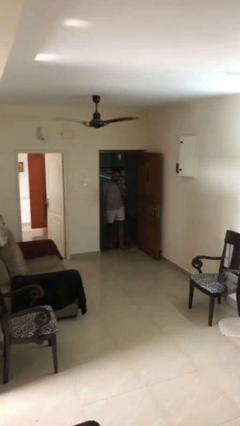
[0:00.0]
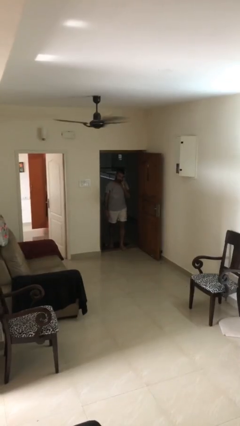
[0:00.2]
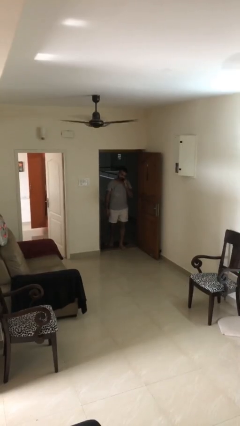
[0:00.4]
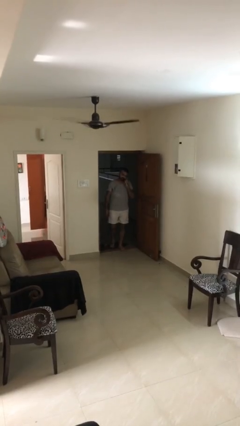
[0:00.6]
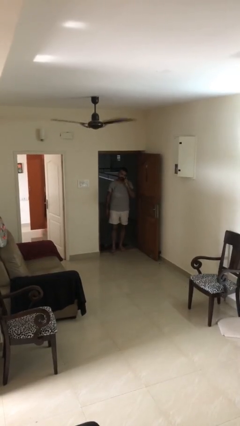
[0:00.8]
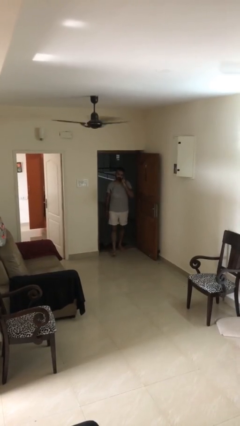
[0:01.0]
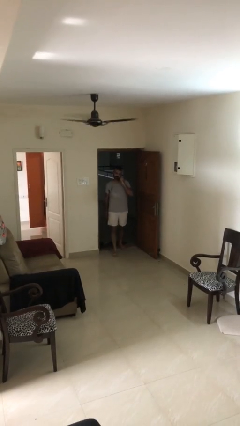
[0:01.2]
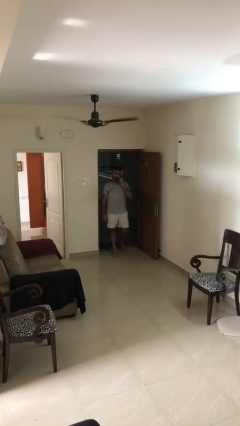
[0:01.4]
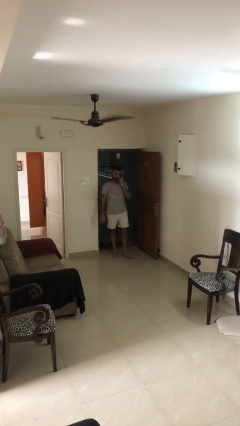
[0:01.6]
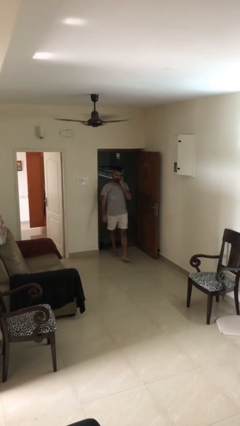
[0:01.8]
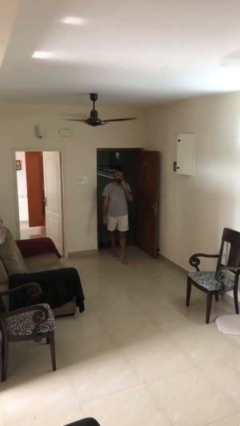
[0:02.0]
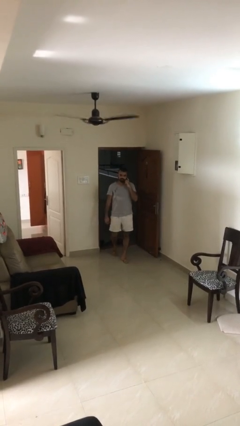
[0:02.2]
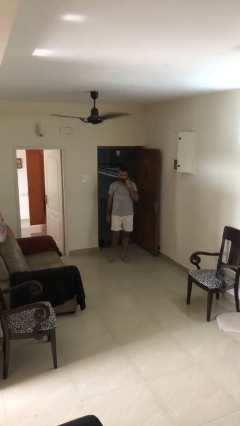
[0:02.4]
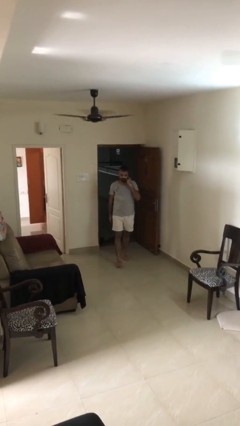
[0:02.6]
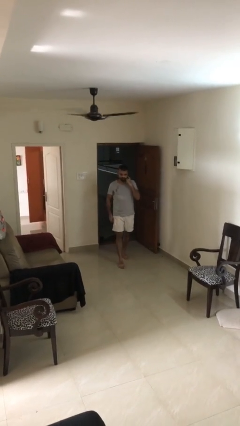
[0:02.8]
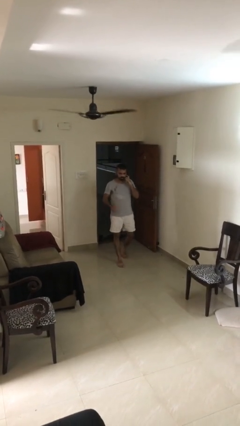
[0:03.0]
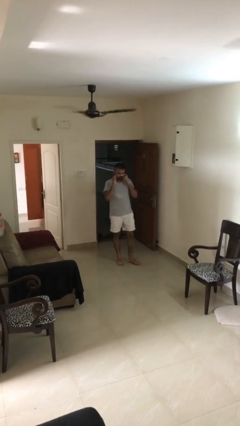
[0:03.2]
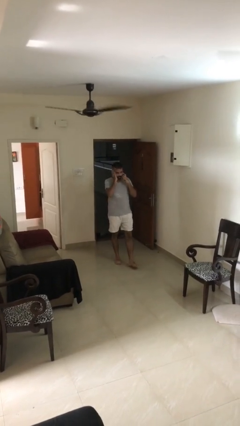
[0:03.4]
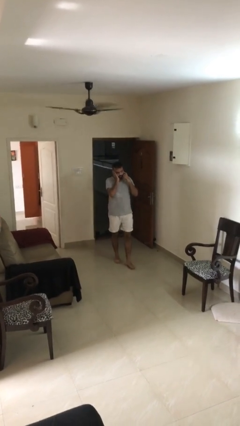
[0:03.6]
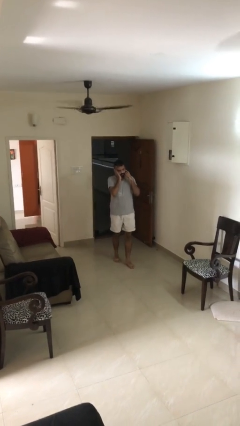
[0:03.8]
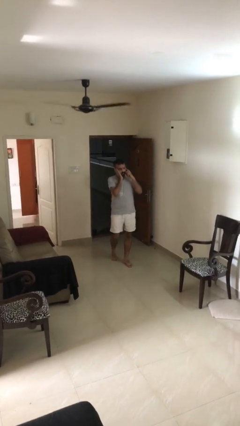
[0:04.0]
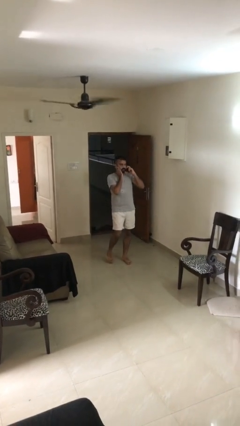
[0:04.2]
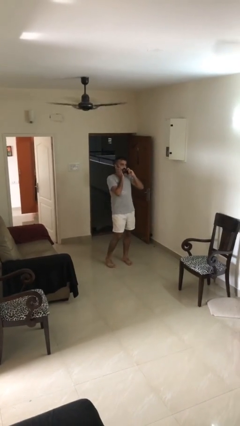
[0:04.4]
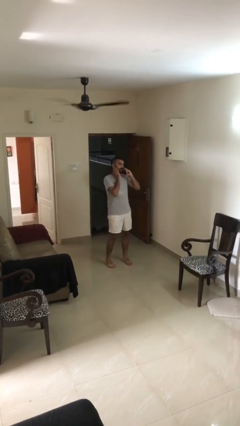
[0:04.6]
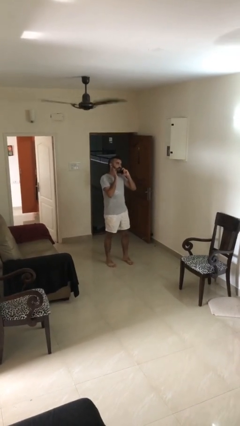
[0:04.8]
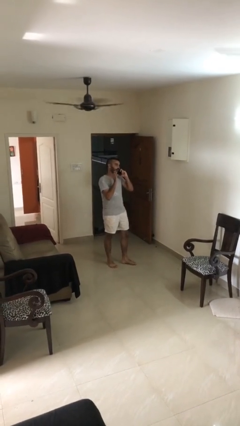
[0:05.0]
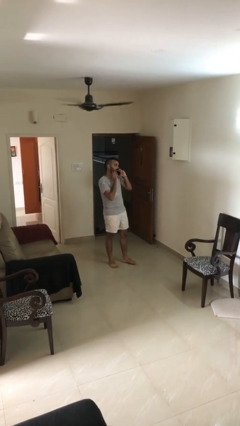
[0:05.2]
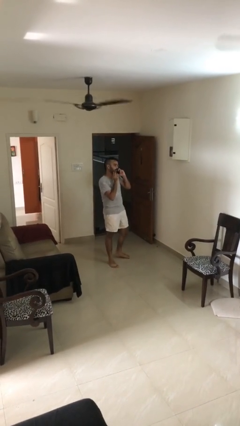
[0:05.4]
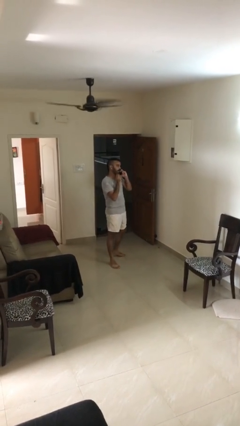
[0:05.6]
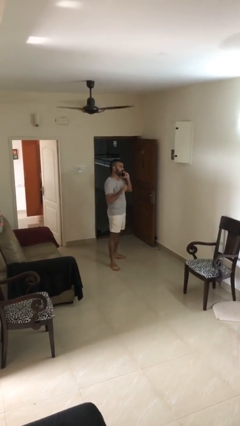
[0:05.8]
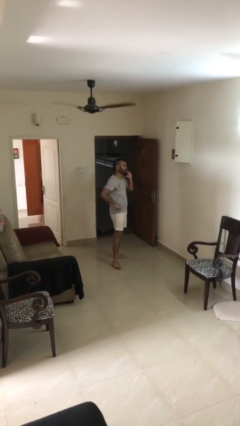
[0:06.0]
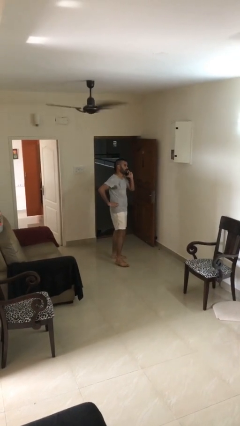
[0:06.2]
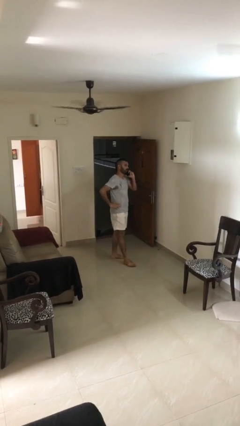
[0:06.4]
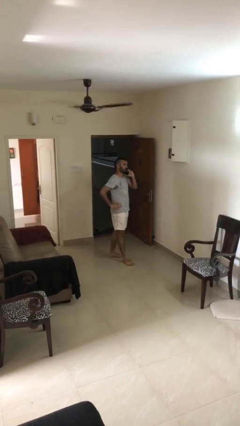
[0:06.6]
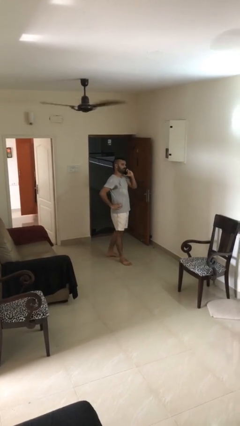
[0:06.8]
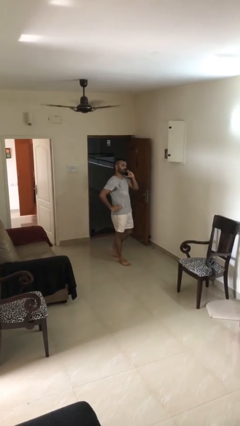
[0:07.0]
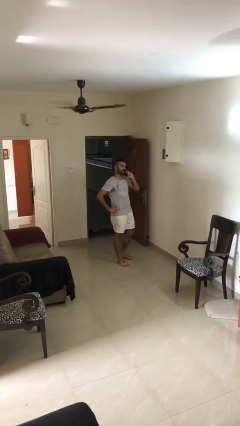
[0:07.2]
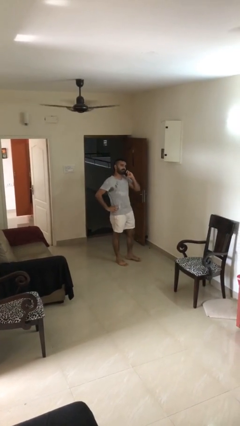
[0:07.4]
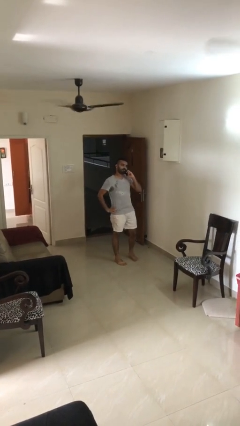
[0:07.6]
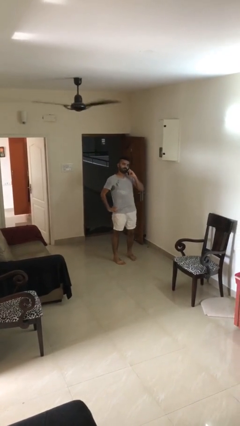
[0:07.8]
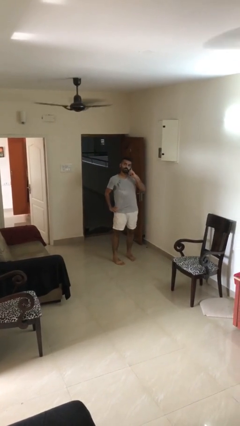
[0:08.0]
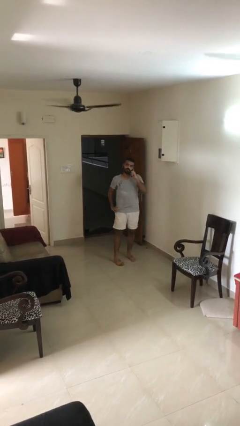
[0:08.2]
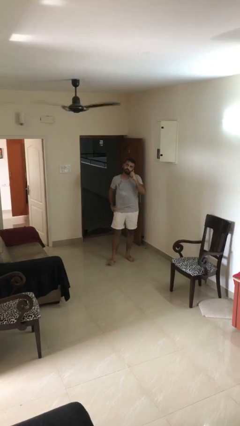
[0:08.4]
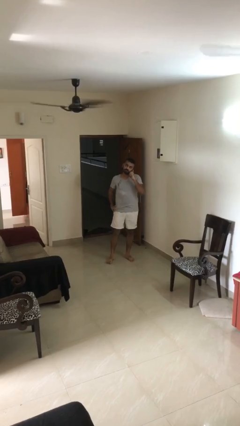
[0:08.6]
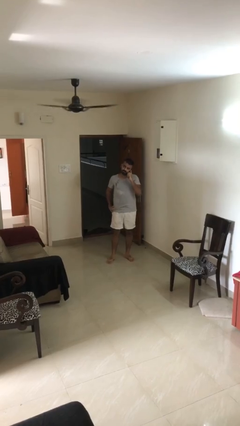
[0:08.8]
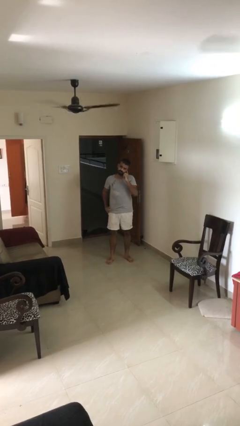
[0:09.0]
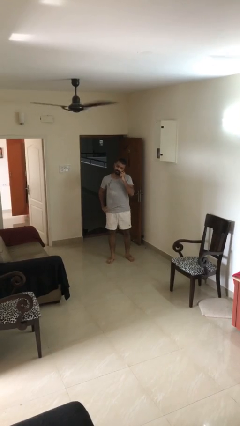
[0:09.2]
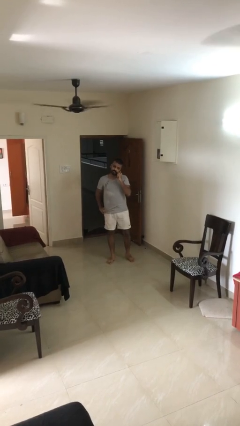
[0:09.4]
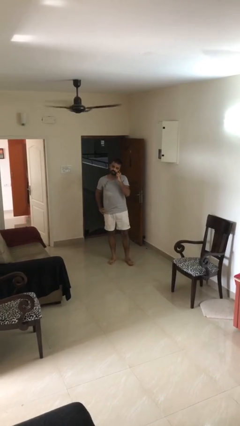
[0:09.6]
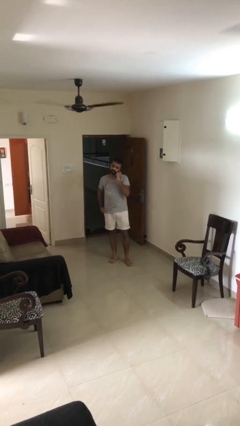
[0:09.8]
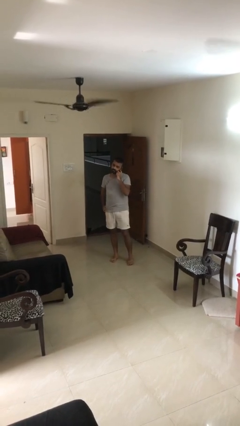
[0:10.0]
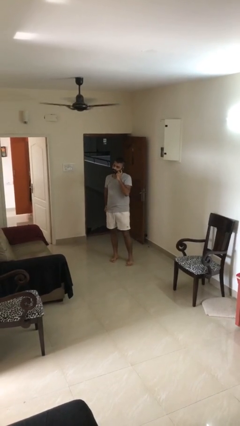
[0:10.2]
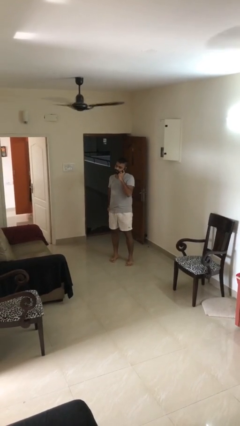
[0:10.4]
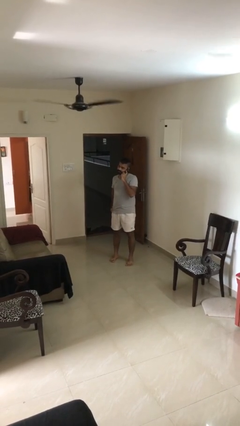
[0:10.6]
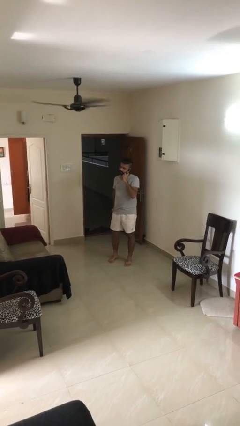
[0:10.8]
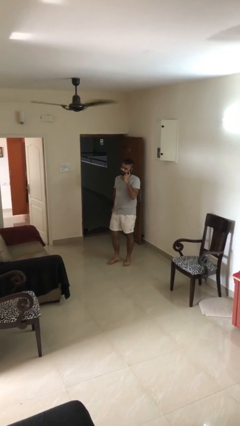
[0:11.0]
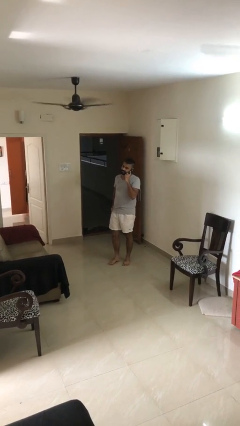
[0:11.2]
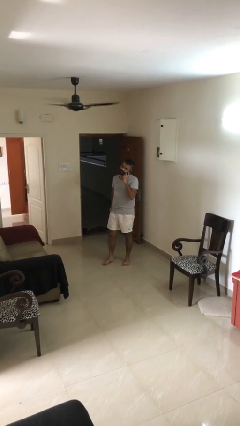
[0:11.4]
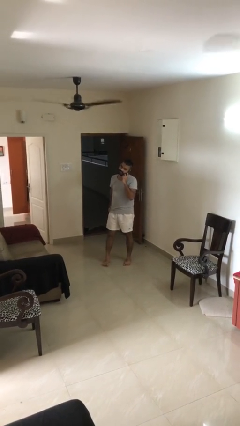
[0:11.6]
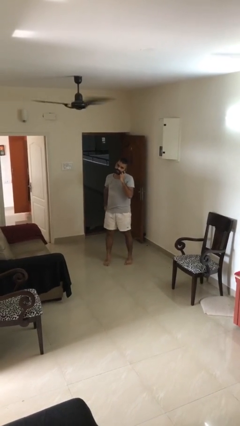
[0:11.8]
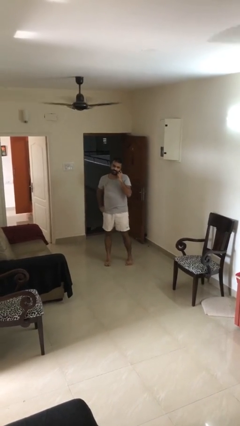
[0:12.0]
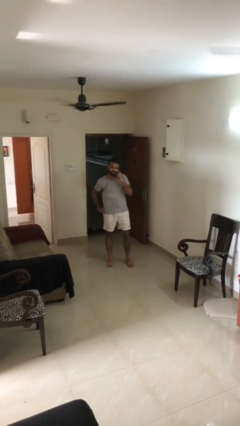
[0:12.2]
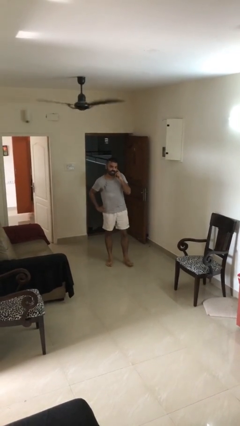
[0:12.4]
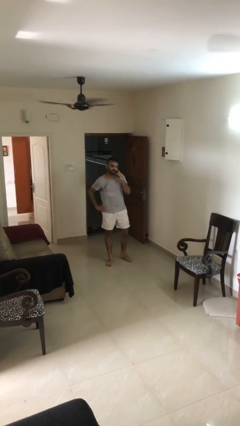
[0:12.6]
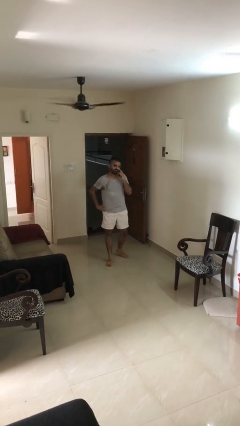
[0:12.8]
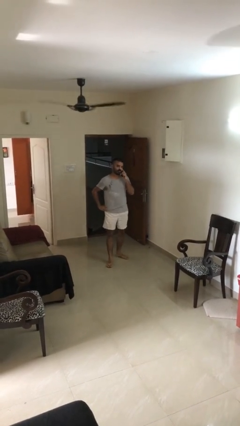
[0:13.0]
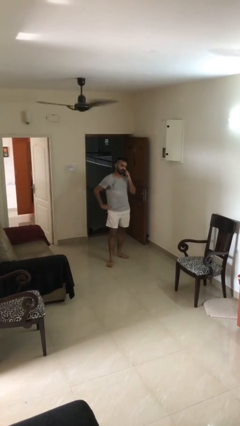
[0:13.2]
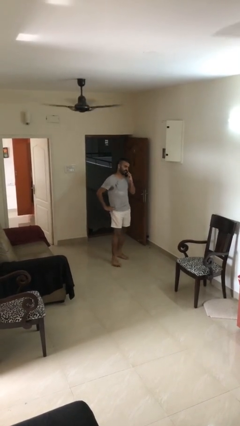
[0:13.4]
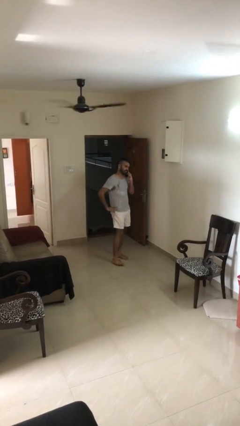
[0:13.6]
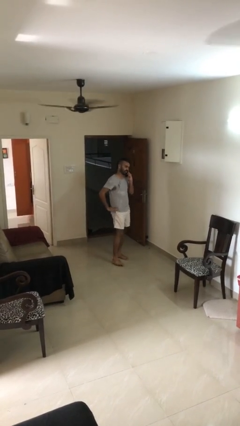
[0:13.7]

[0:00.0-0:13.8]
person enters scene through structure

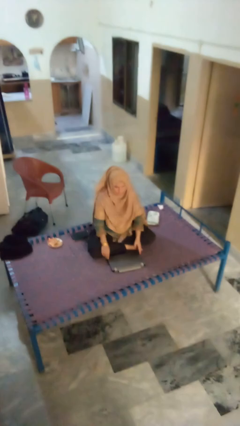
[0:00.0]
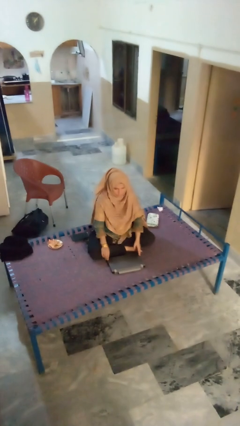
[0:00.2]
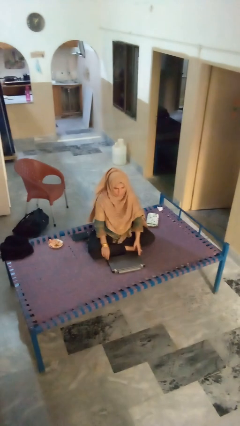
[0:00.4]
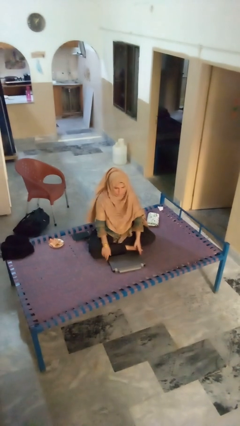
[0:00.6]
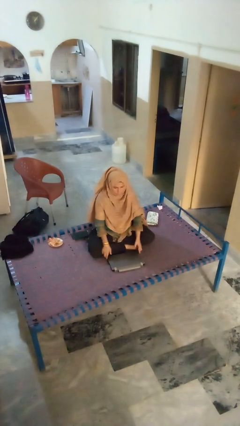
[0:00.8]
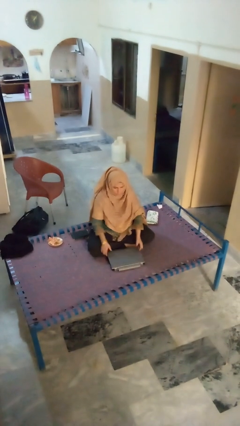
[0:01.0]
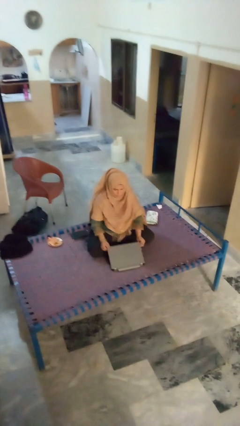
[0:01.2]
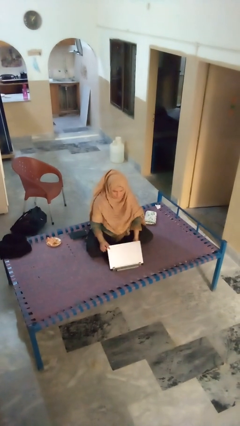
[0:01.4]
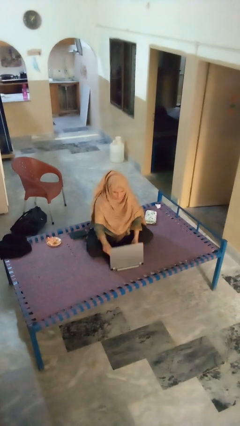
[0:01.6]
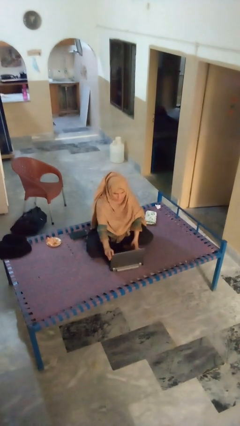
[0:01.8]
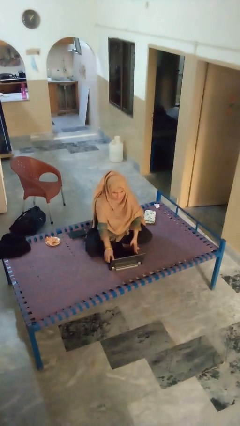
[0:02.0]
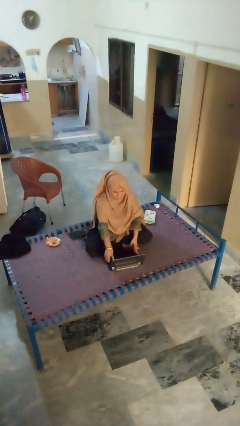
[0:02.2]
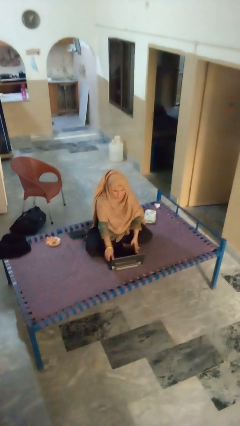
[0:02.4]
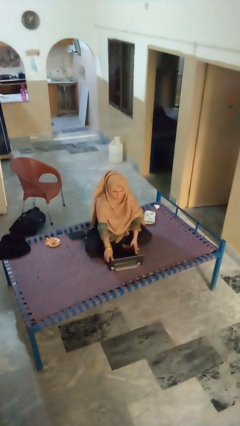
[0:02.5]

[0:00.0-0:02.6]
person opens laptop

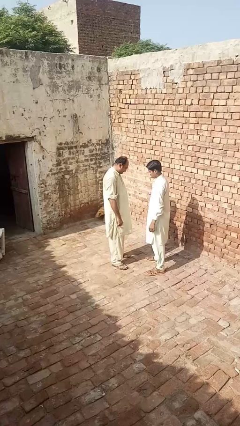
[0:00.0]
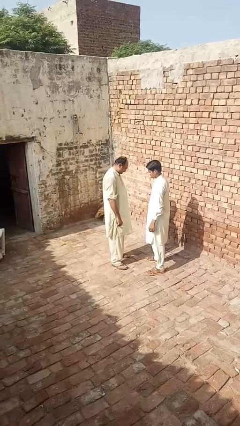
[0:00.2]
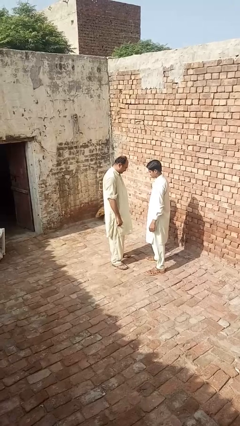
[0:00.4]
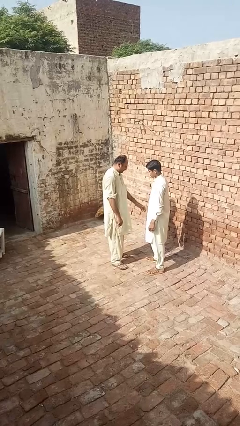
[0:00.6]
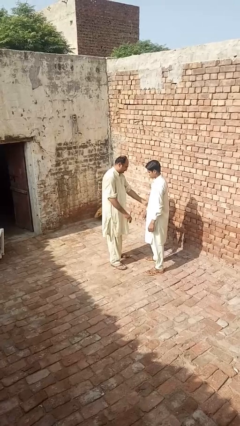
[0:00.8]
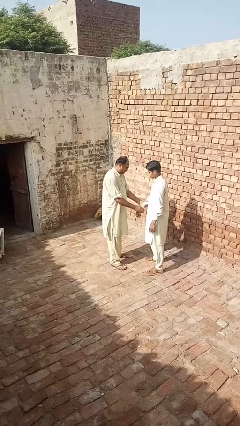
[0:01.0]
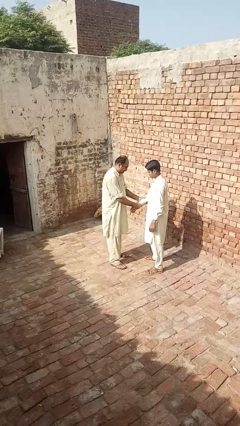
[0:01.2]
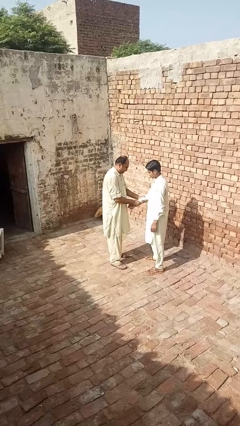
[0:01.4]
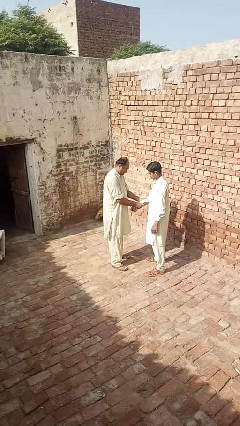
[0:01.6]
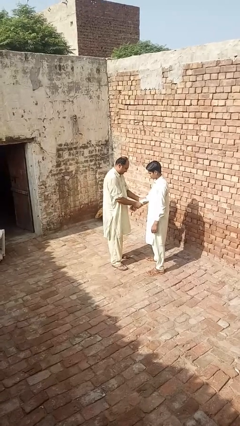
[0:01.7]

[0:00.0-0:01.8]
person grabs person by forearm
